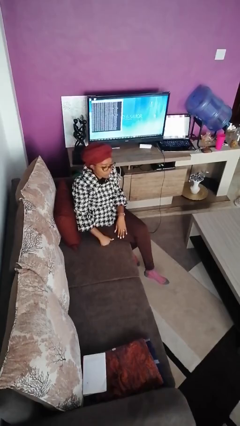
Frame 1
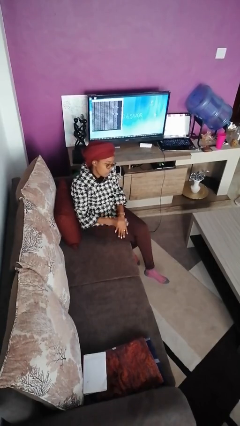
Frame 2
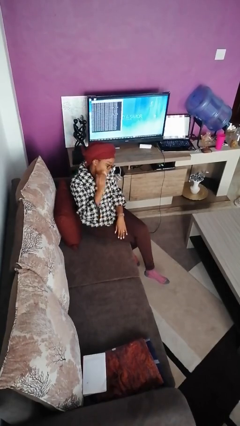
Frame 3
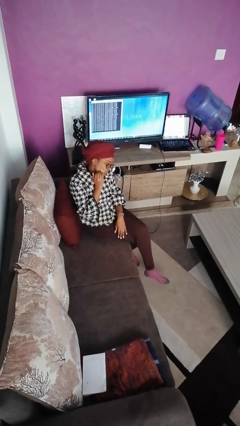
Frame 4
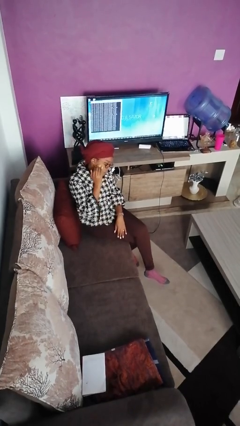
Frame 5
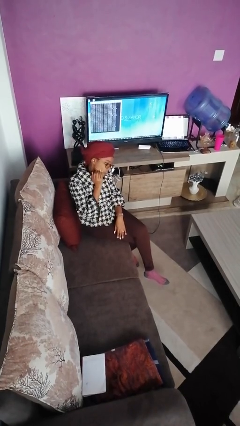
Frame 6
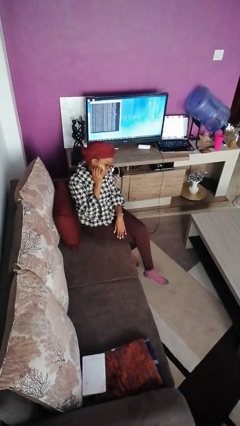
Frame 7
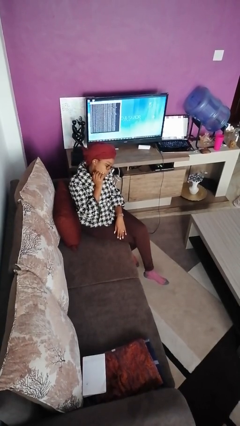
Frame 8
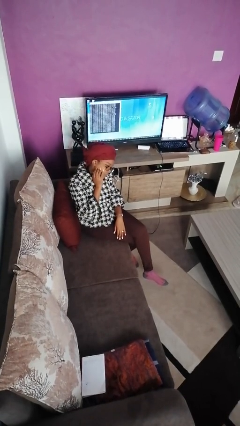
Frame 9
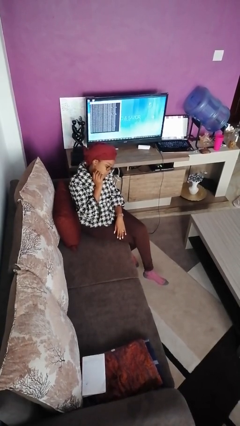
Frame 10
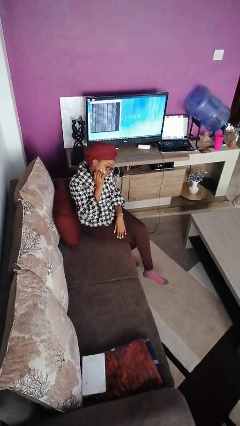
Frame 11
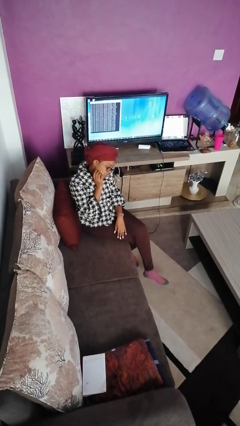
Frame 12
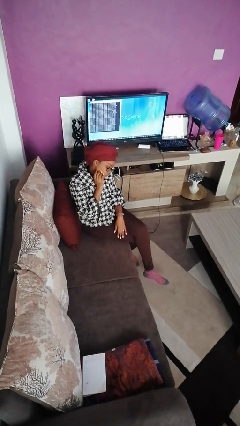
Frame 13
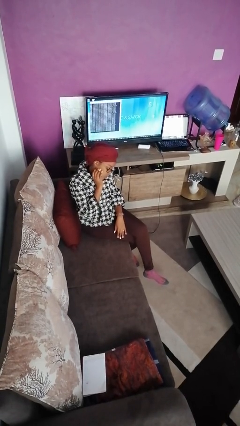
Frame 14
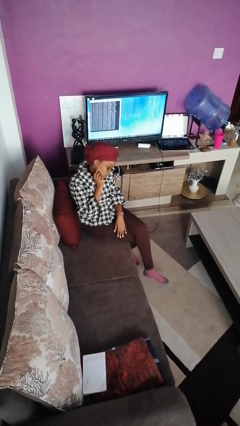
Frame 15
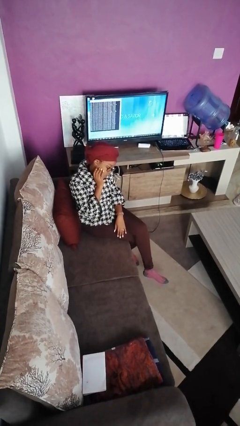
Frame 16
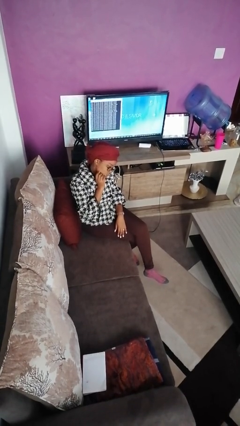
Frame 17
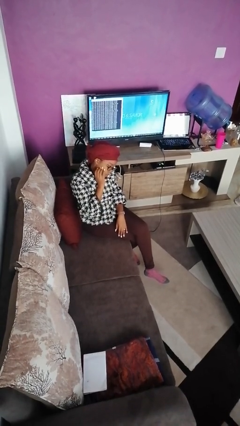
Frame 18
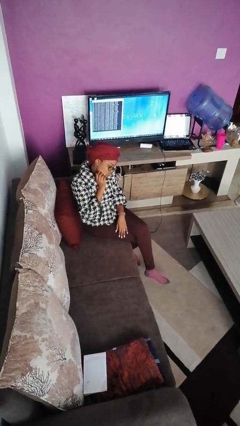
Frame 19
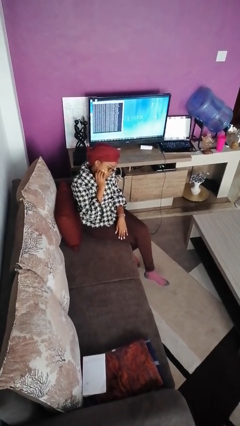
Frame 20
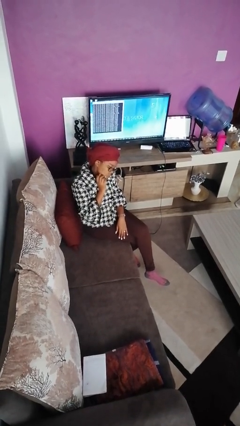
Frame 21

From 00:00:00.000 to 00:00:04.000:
person scratches face

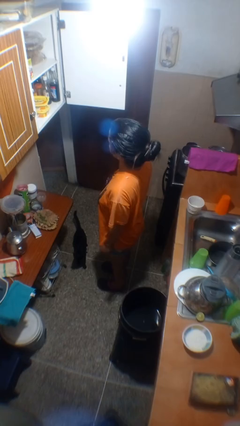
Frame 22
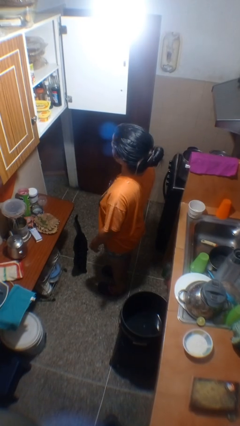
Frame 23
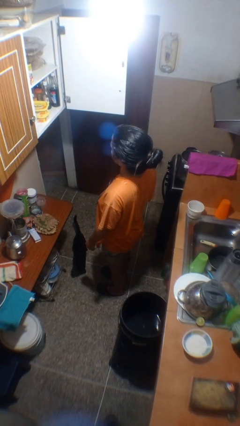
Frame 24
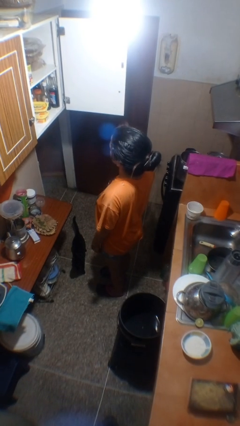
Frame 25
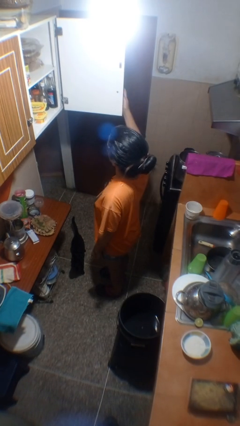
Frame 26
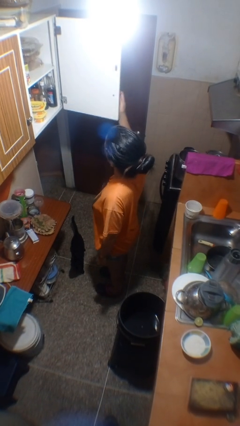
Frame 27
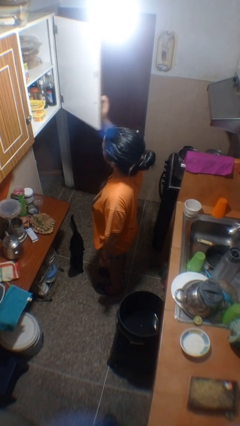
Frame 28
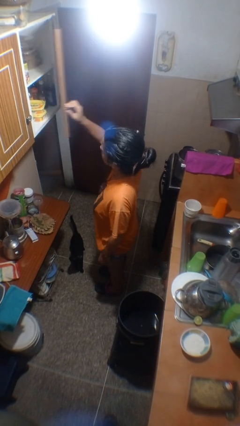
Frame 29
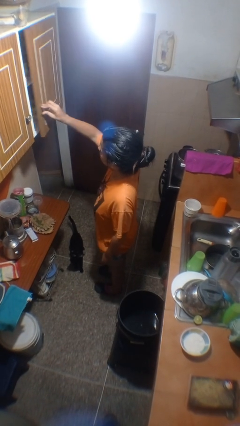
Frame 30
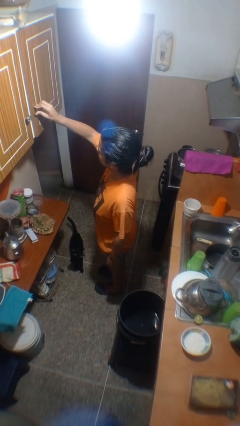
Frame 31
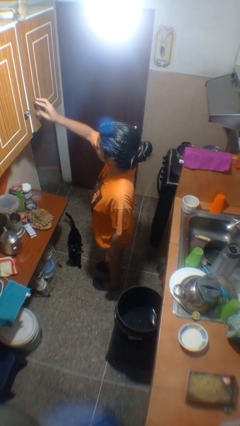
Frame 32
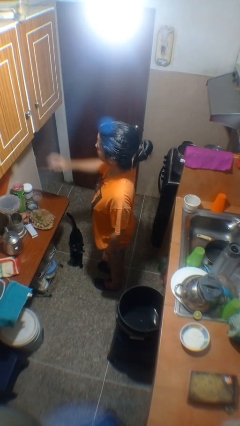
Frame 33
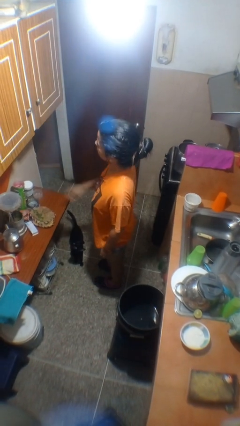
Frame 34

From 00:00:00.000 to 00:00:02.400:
person closes cabinet

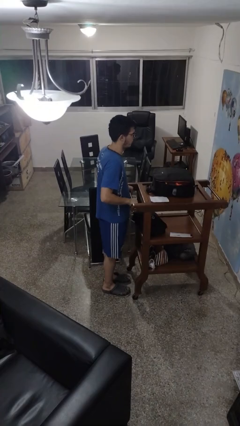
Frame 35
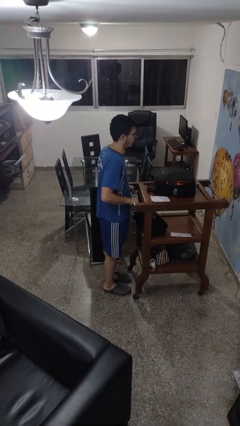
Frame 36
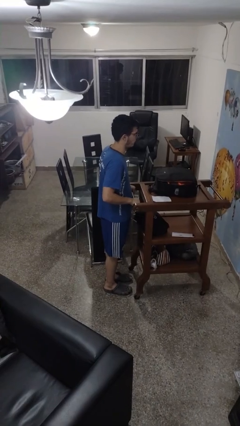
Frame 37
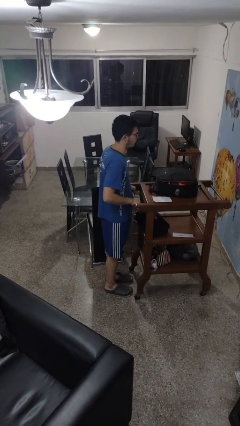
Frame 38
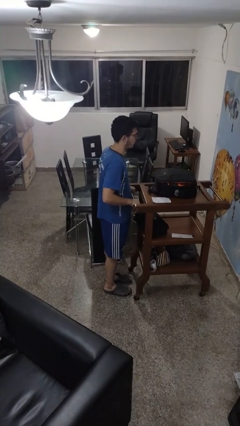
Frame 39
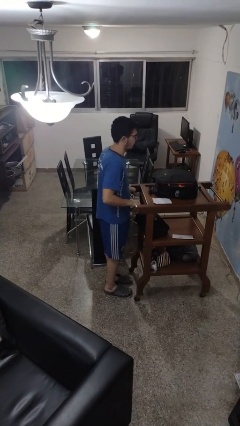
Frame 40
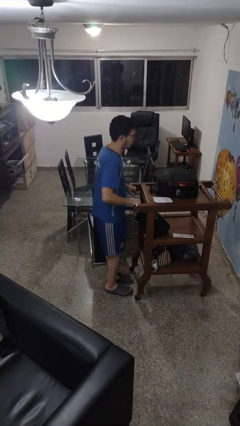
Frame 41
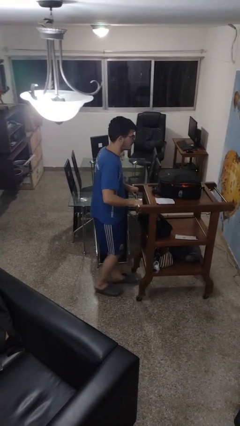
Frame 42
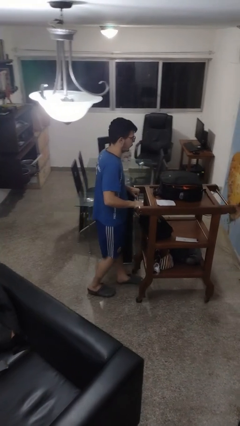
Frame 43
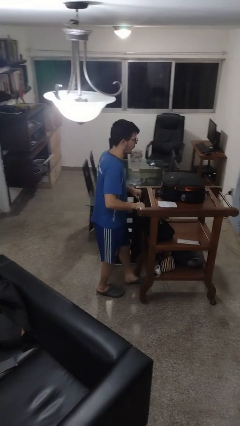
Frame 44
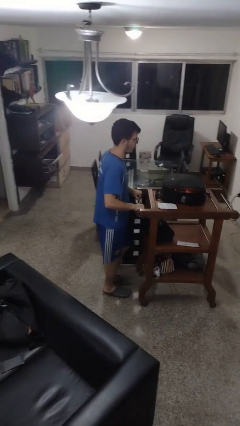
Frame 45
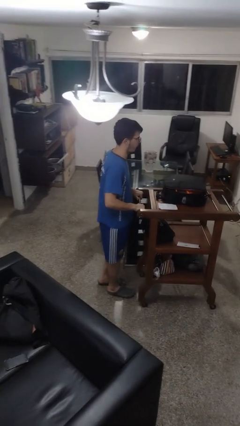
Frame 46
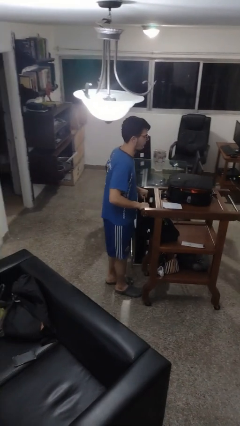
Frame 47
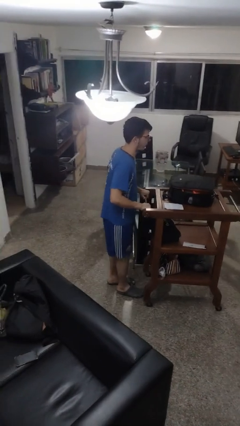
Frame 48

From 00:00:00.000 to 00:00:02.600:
person pulls wheeled cart

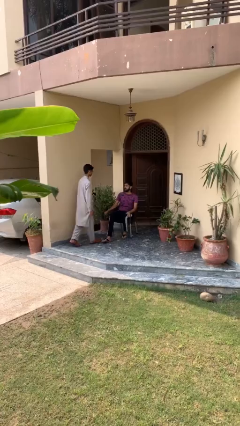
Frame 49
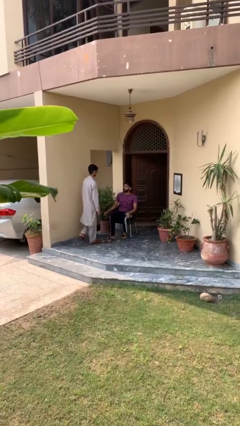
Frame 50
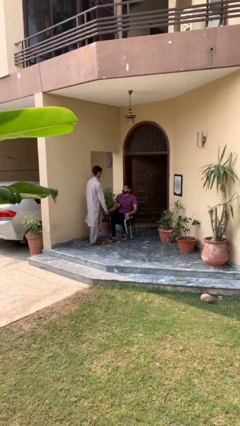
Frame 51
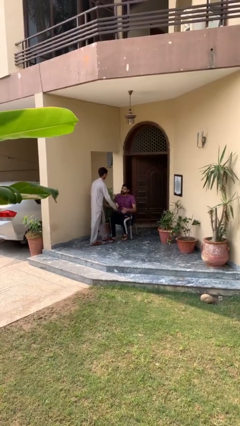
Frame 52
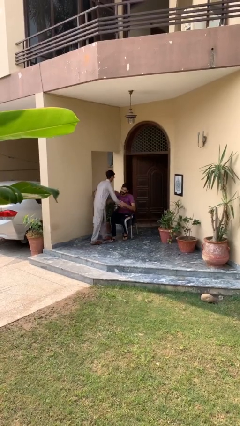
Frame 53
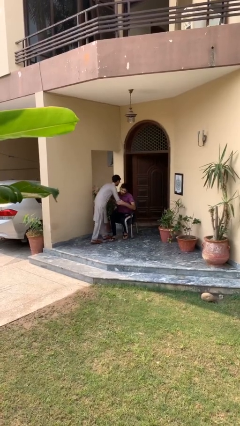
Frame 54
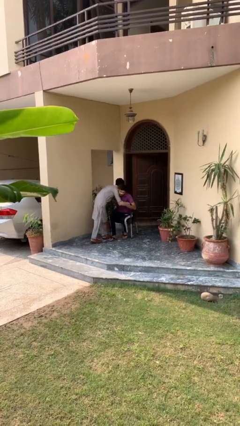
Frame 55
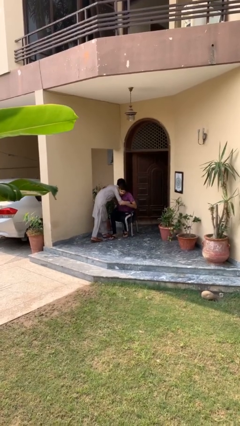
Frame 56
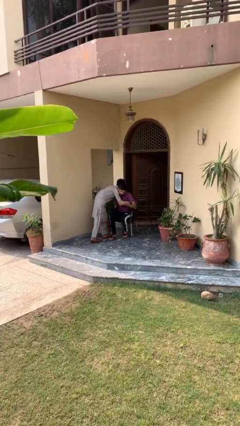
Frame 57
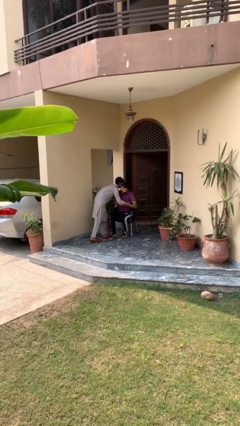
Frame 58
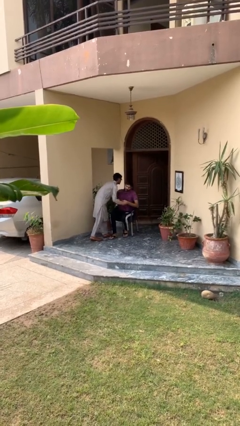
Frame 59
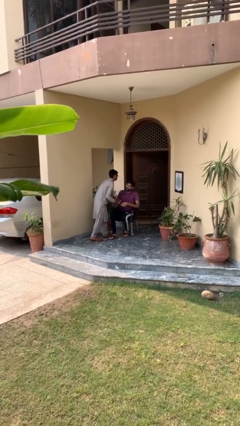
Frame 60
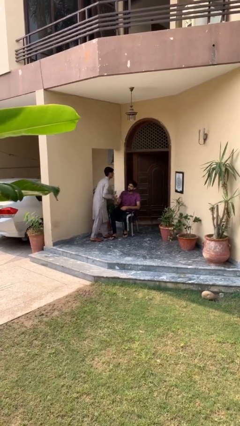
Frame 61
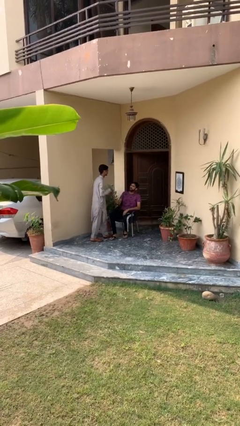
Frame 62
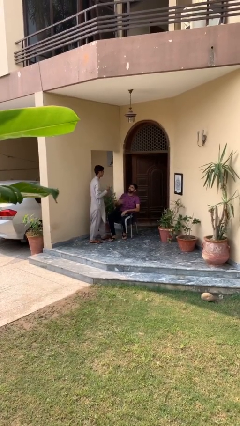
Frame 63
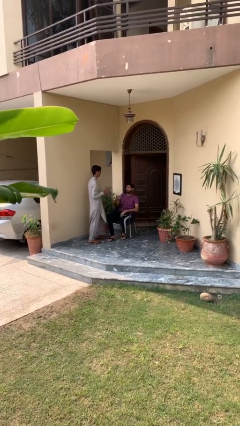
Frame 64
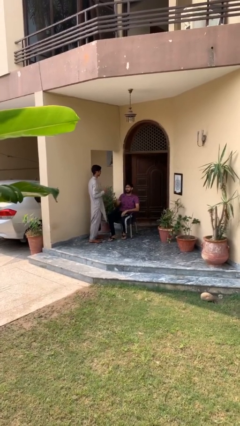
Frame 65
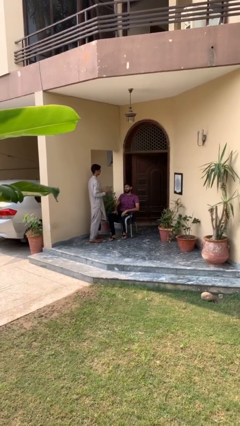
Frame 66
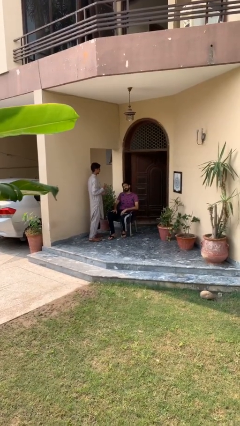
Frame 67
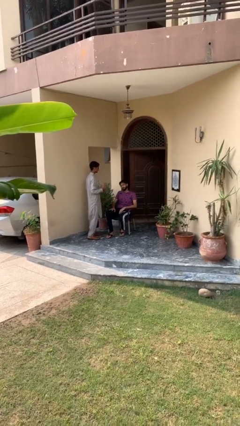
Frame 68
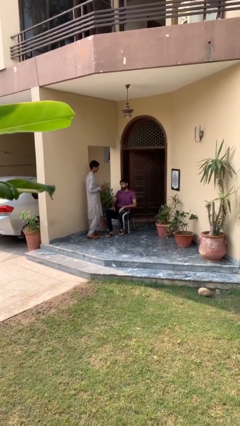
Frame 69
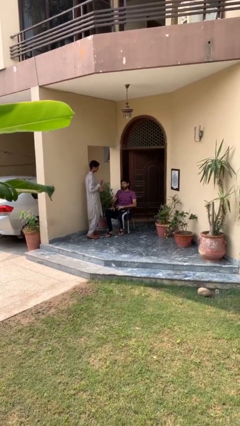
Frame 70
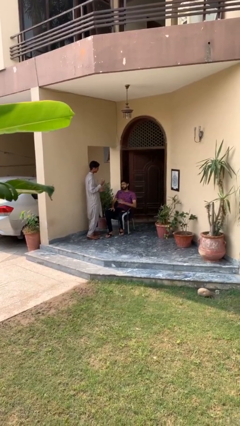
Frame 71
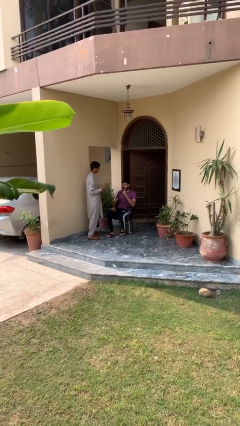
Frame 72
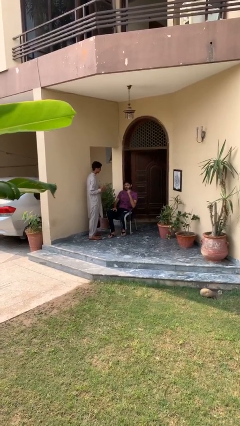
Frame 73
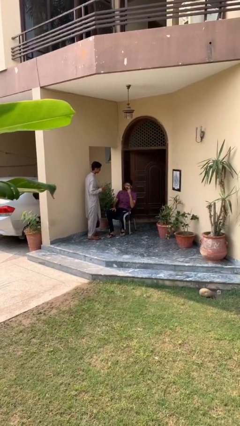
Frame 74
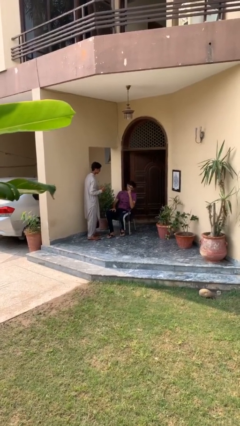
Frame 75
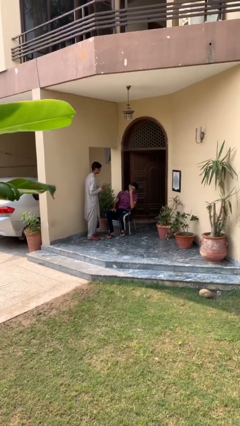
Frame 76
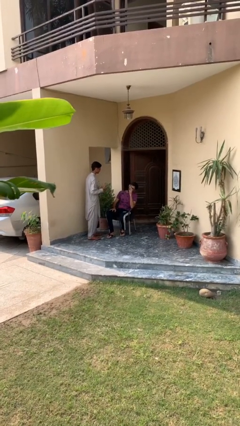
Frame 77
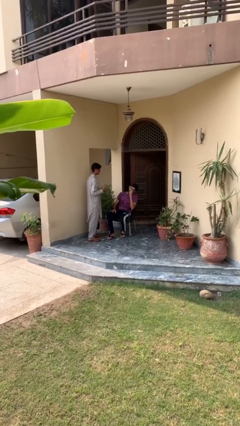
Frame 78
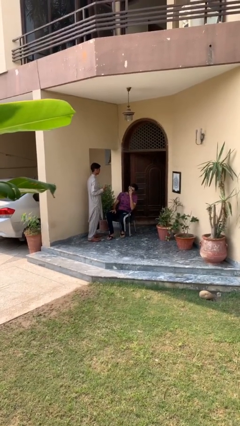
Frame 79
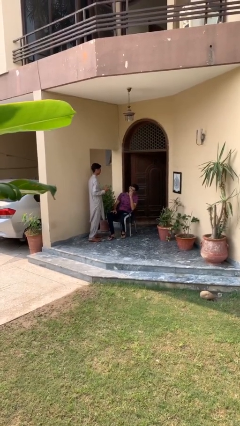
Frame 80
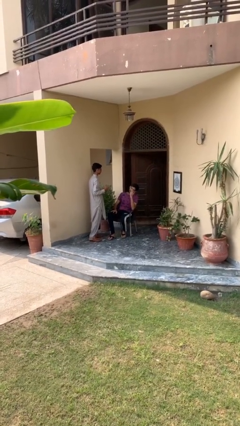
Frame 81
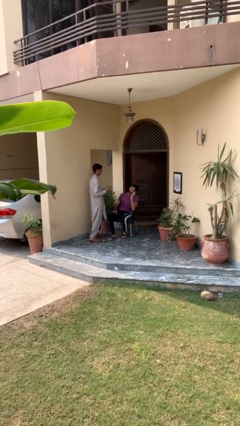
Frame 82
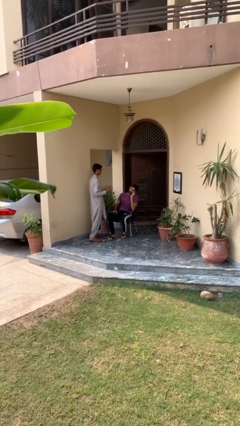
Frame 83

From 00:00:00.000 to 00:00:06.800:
person embraces person

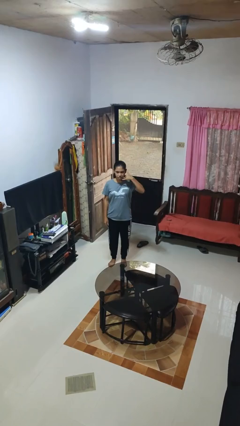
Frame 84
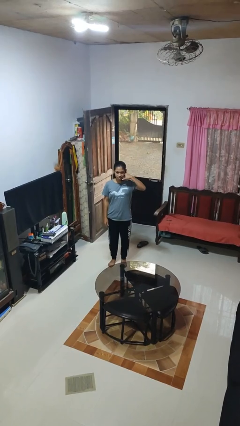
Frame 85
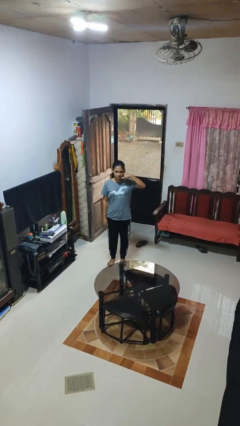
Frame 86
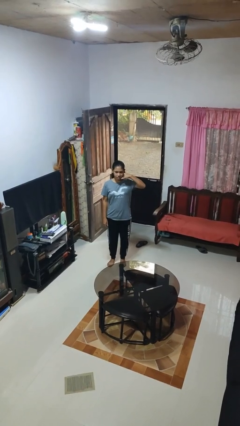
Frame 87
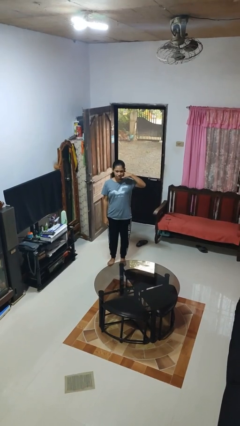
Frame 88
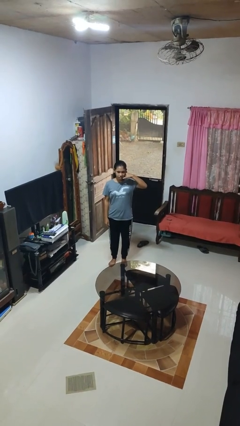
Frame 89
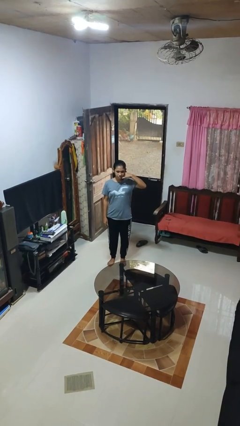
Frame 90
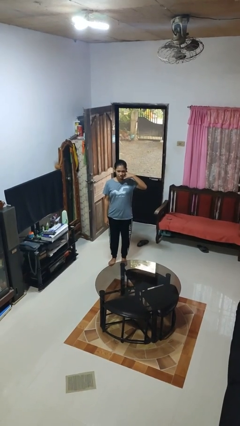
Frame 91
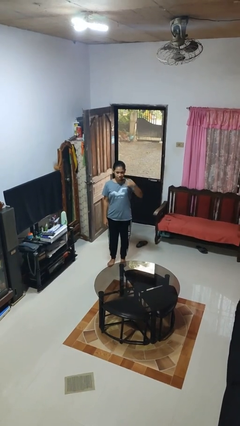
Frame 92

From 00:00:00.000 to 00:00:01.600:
person gestures call me
